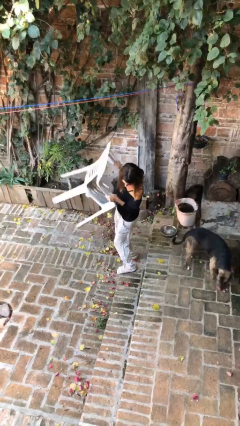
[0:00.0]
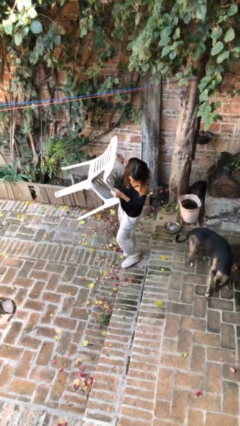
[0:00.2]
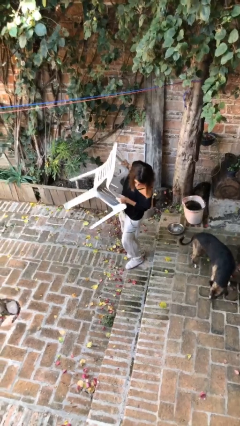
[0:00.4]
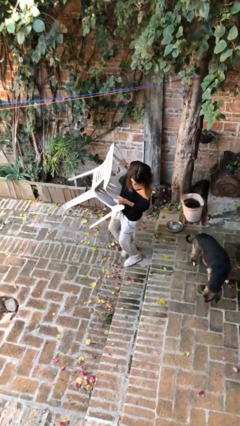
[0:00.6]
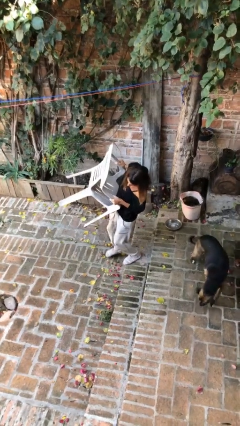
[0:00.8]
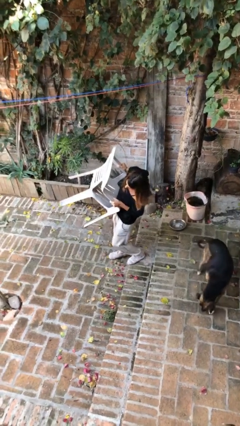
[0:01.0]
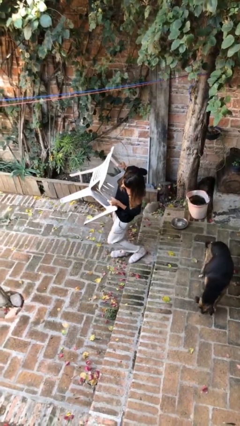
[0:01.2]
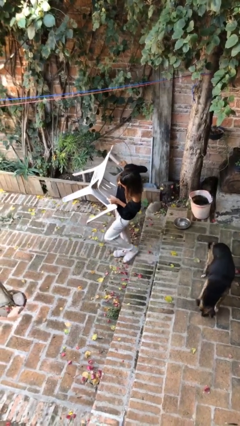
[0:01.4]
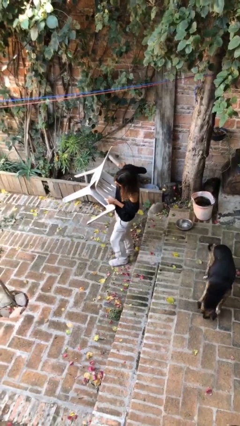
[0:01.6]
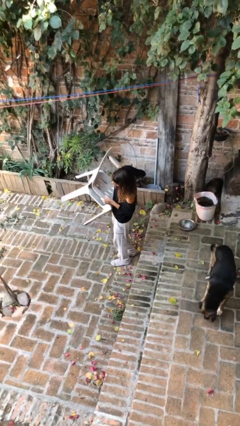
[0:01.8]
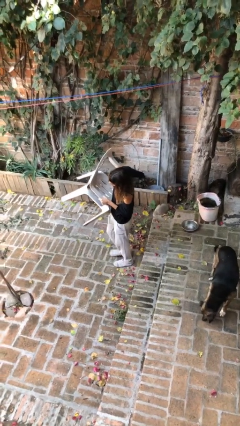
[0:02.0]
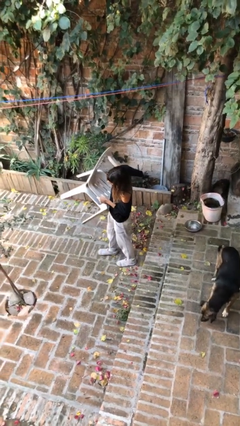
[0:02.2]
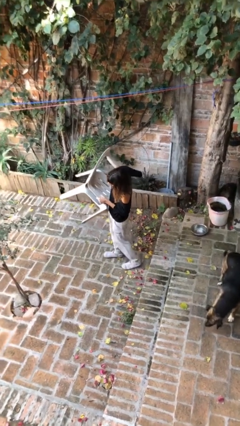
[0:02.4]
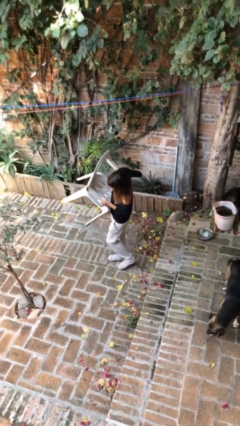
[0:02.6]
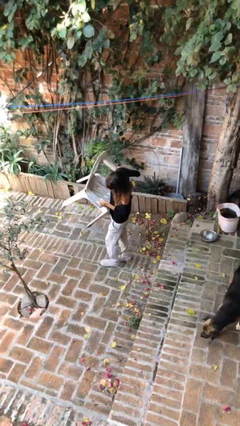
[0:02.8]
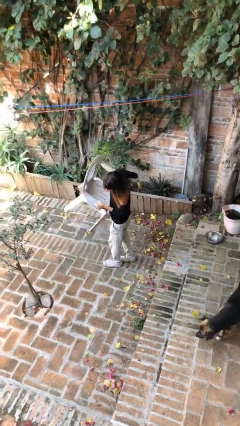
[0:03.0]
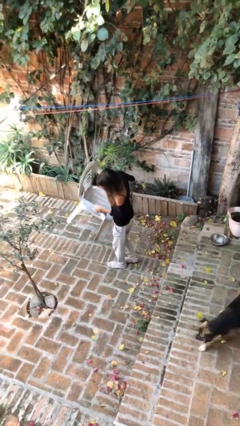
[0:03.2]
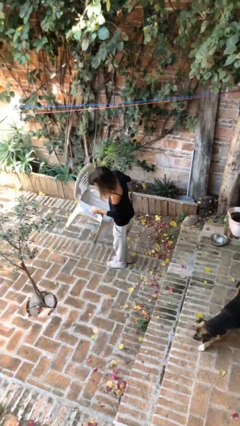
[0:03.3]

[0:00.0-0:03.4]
person carries heavy object

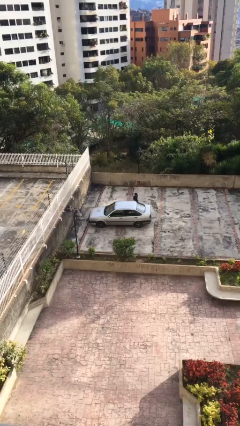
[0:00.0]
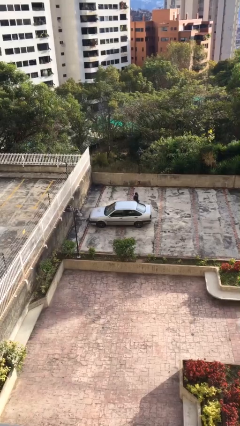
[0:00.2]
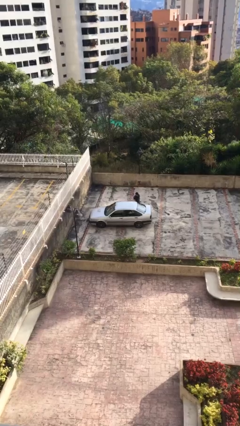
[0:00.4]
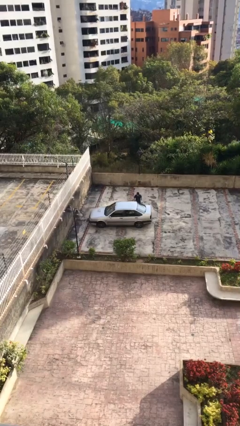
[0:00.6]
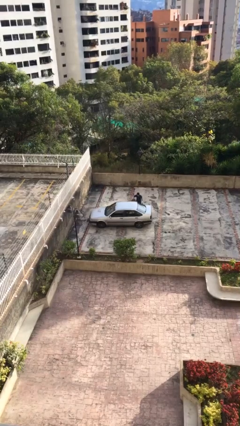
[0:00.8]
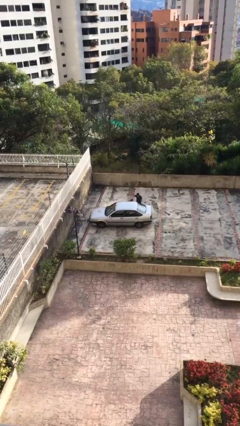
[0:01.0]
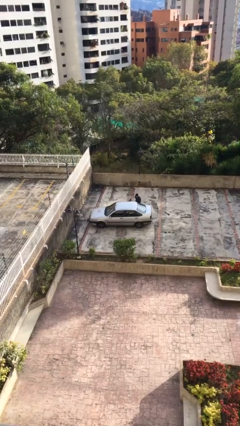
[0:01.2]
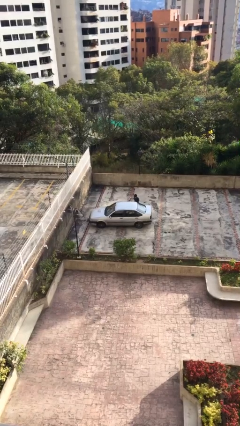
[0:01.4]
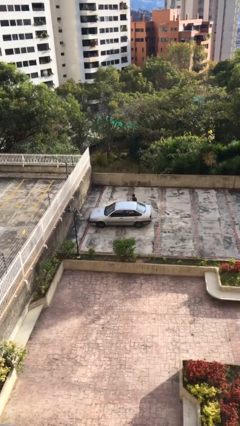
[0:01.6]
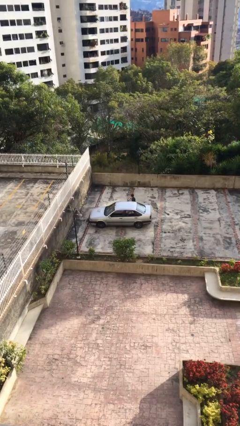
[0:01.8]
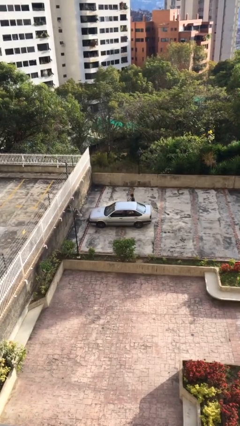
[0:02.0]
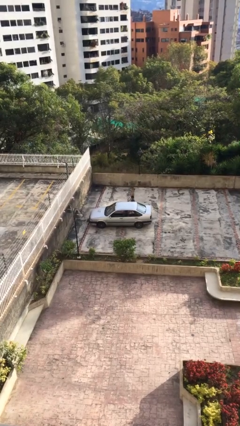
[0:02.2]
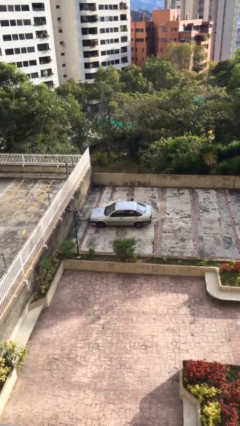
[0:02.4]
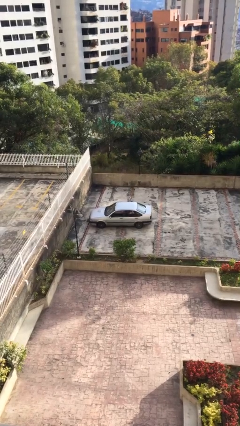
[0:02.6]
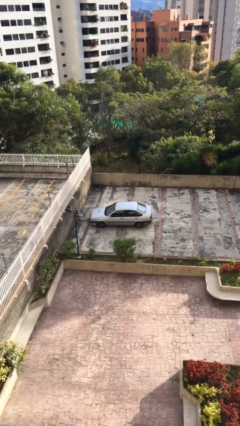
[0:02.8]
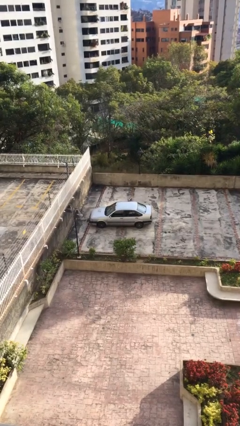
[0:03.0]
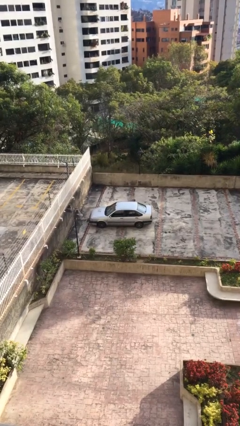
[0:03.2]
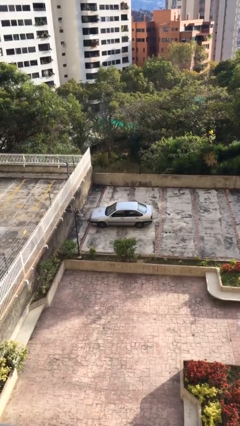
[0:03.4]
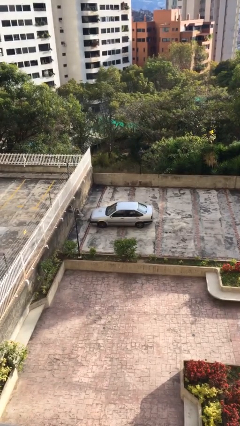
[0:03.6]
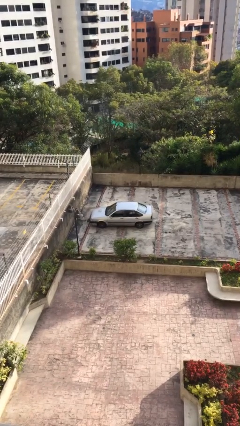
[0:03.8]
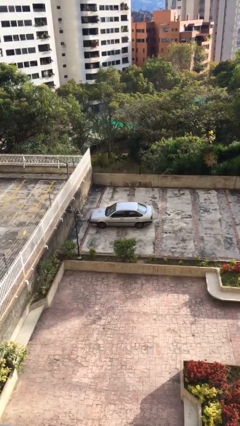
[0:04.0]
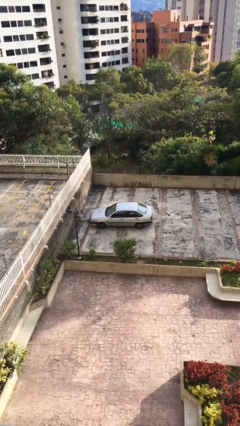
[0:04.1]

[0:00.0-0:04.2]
car picks up person

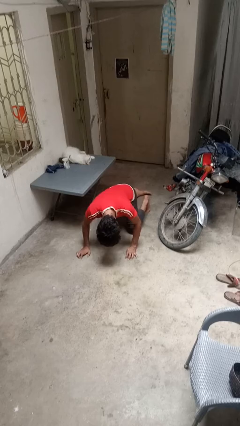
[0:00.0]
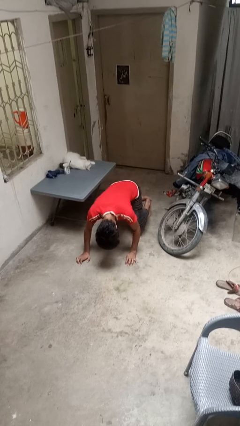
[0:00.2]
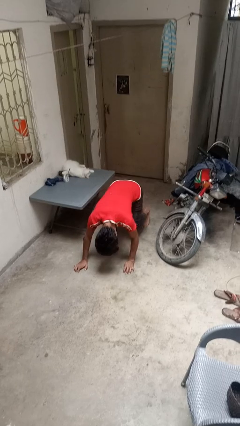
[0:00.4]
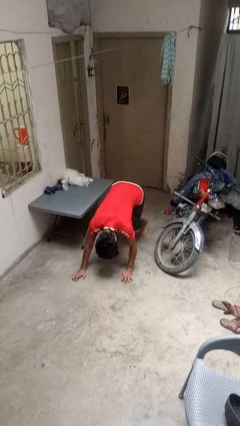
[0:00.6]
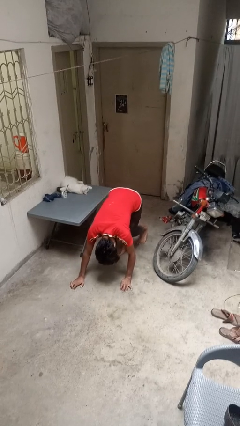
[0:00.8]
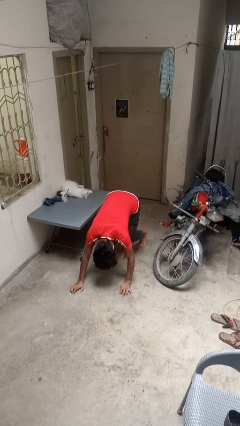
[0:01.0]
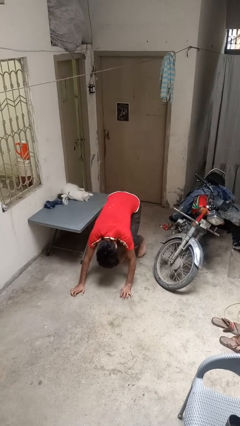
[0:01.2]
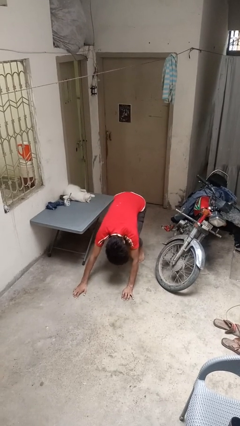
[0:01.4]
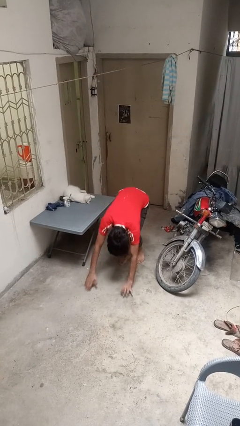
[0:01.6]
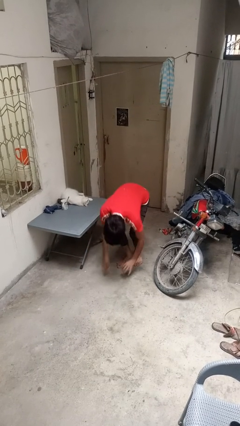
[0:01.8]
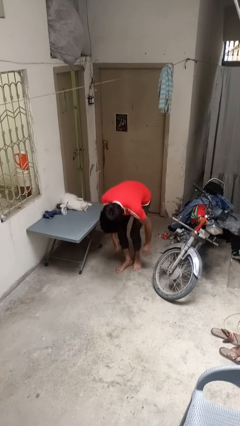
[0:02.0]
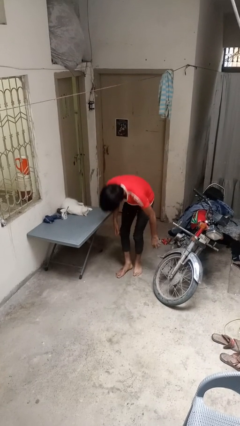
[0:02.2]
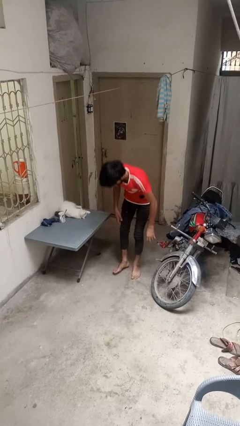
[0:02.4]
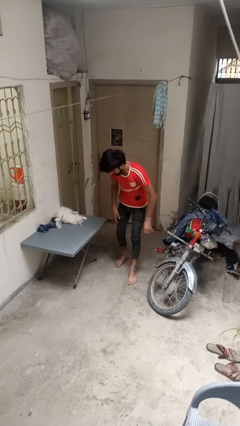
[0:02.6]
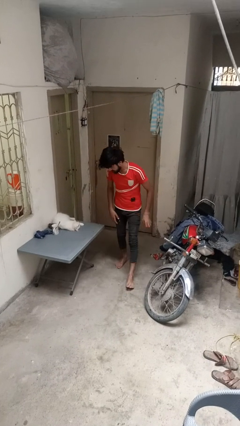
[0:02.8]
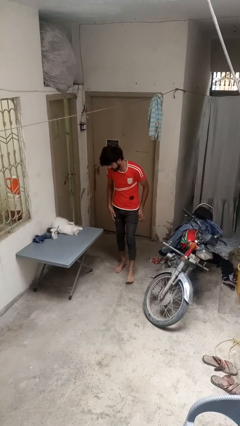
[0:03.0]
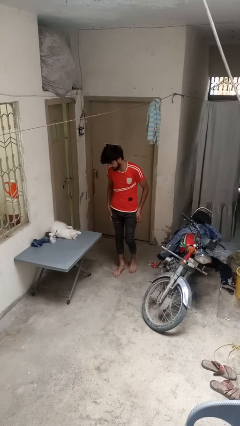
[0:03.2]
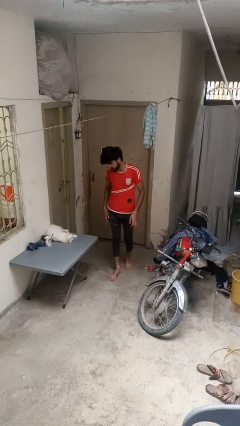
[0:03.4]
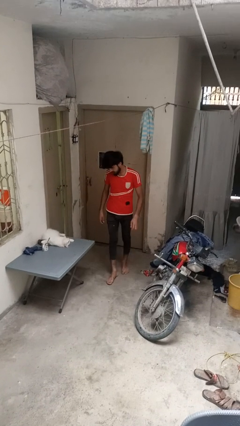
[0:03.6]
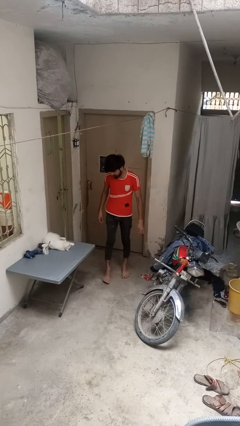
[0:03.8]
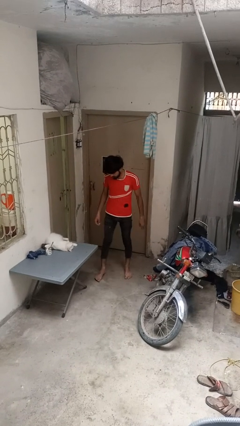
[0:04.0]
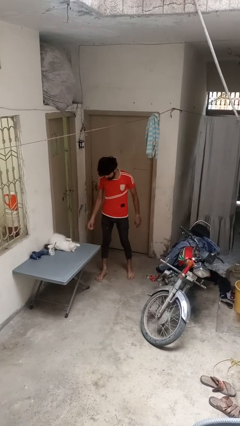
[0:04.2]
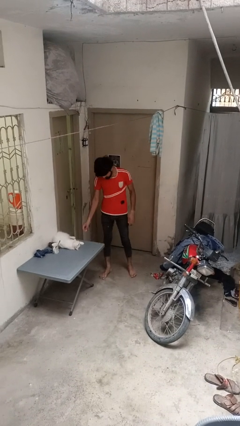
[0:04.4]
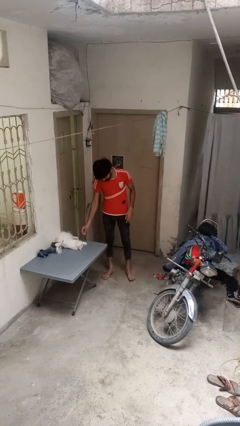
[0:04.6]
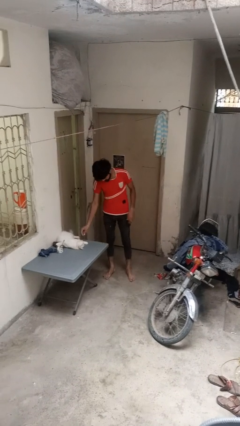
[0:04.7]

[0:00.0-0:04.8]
person stands up from floor

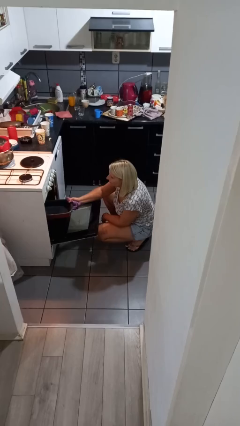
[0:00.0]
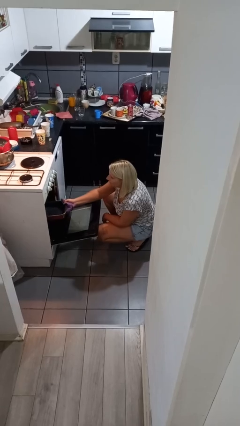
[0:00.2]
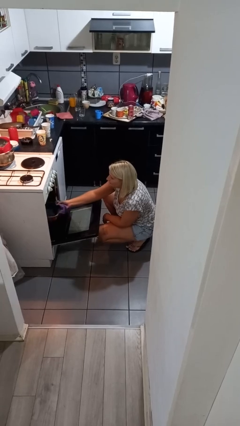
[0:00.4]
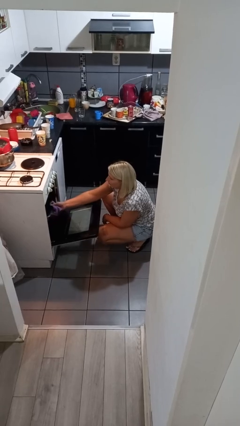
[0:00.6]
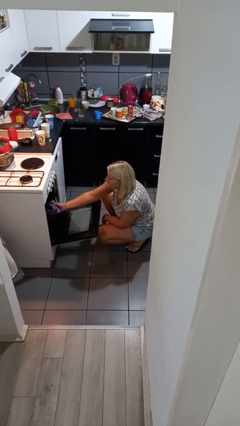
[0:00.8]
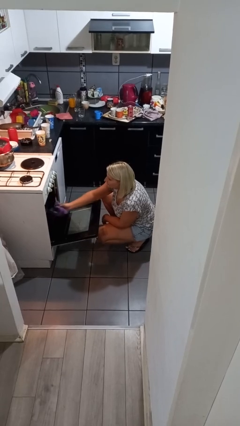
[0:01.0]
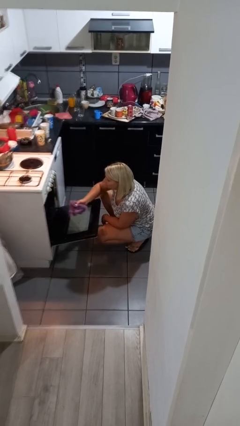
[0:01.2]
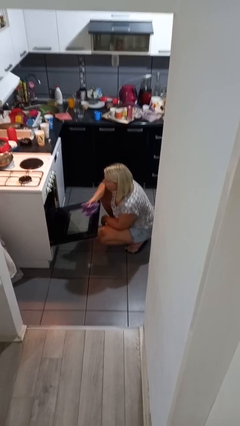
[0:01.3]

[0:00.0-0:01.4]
person puts object into oven

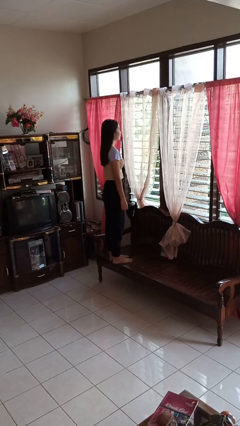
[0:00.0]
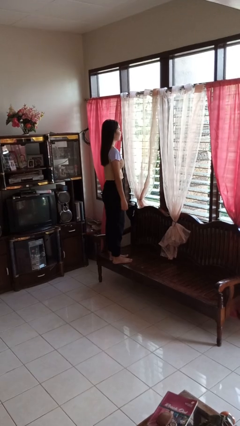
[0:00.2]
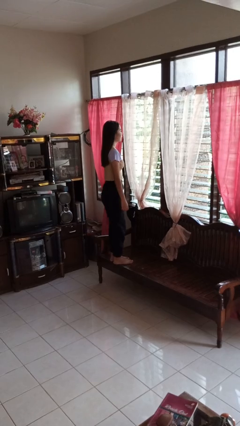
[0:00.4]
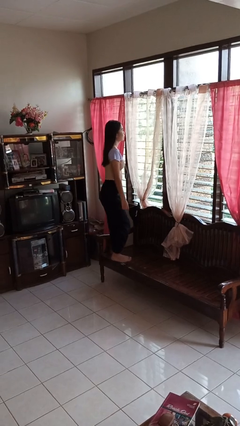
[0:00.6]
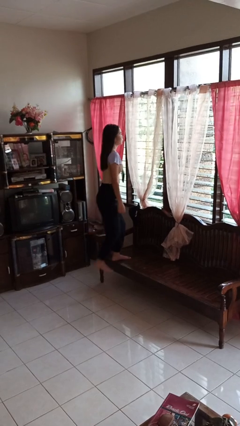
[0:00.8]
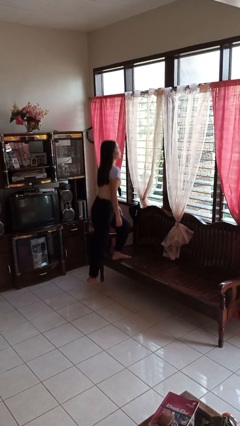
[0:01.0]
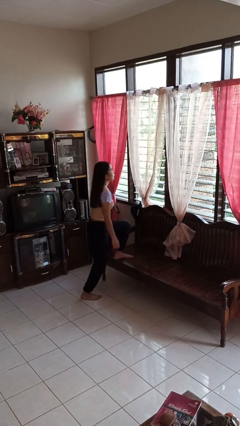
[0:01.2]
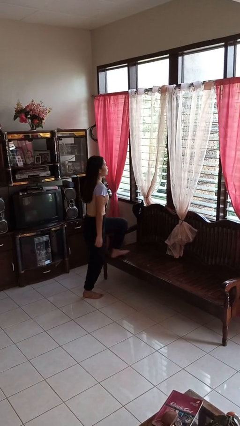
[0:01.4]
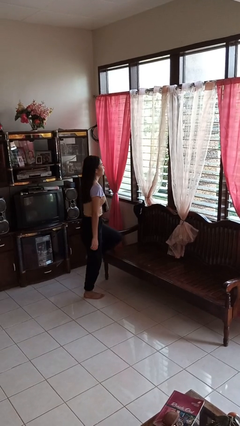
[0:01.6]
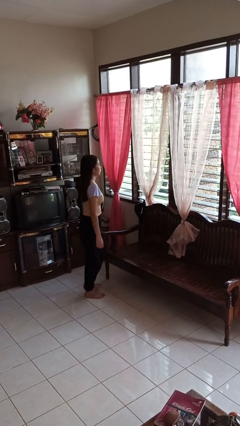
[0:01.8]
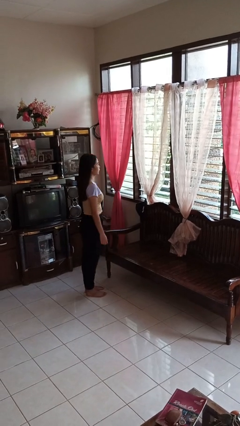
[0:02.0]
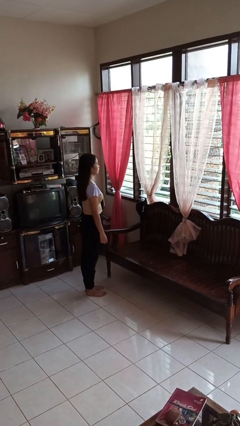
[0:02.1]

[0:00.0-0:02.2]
person climbs off couch

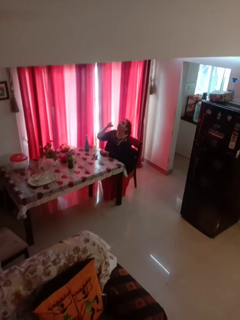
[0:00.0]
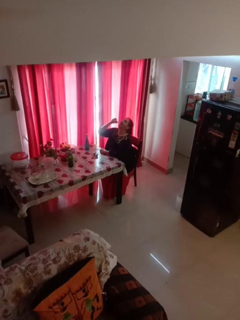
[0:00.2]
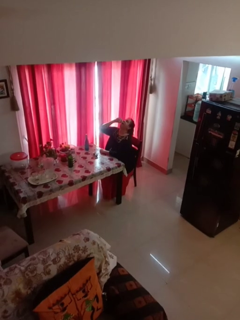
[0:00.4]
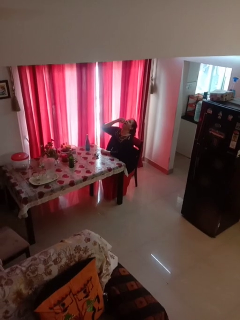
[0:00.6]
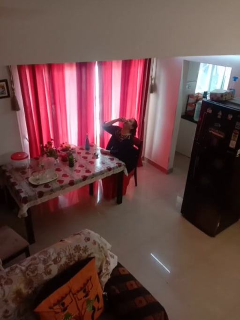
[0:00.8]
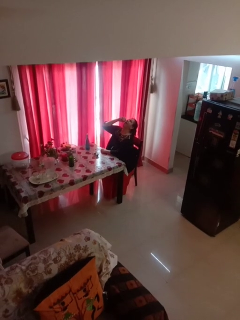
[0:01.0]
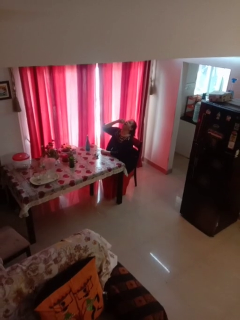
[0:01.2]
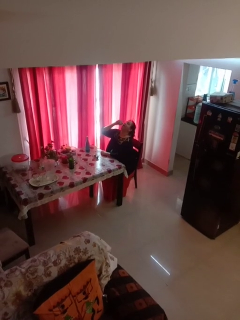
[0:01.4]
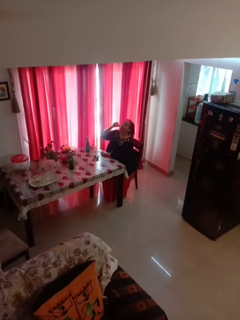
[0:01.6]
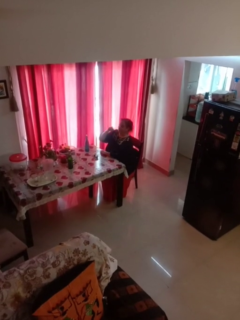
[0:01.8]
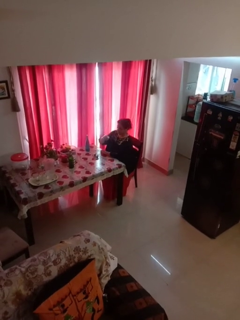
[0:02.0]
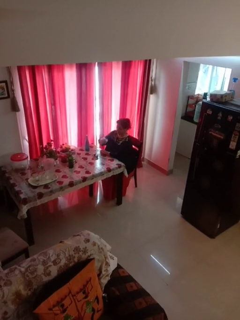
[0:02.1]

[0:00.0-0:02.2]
person drinks from shotglass
